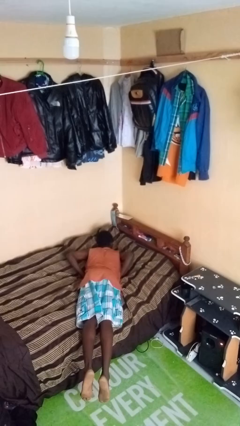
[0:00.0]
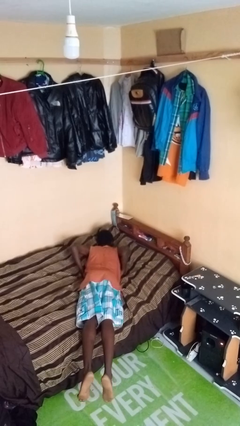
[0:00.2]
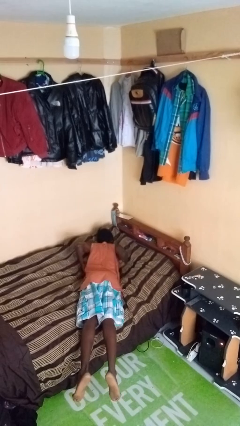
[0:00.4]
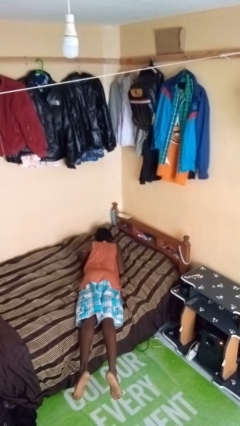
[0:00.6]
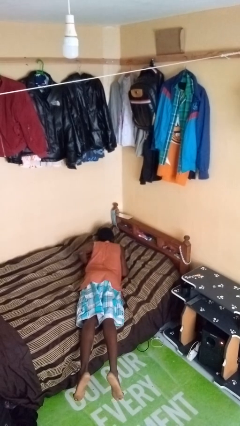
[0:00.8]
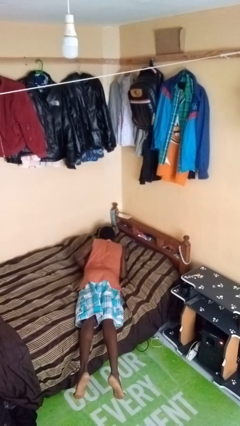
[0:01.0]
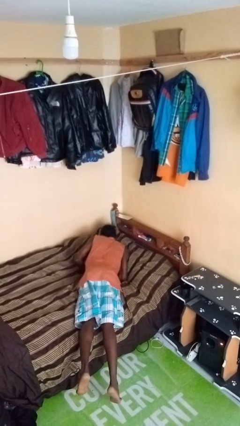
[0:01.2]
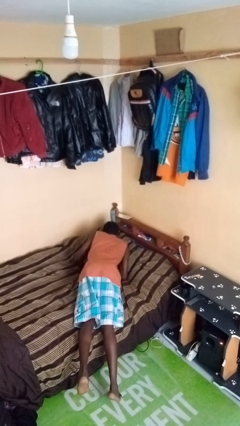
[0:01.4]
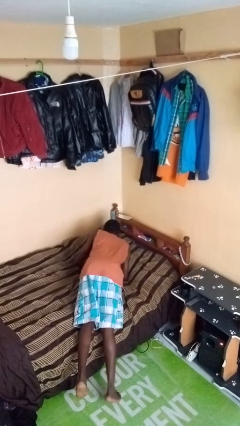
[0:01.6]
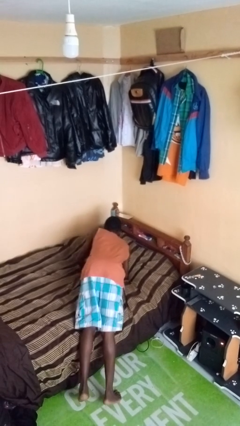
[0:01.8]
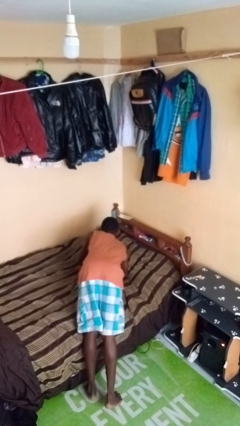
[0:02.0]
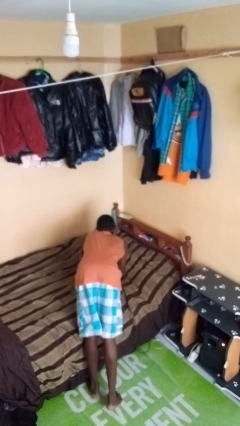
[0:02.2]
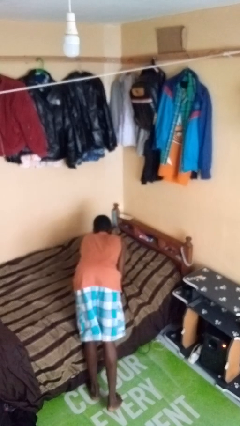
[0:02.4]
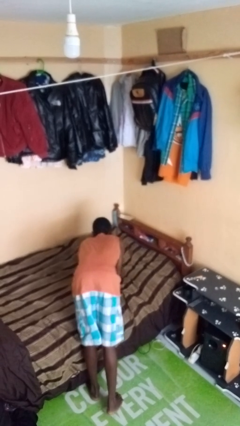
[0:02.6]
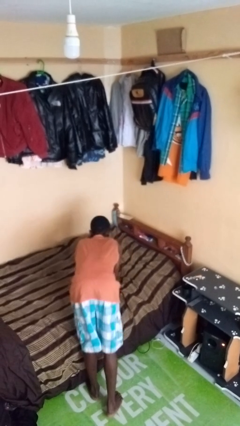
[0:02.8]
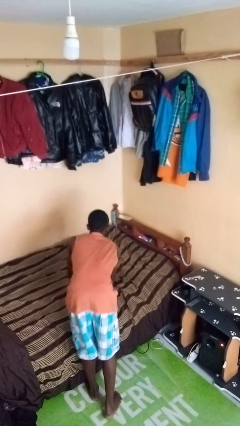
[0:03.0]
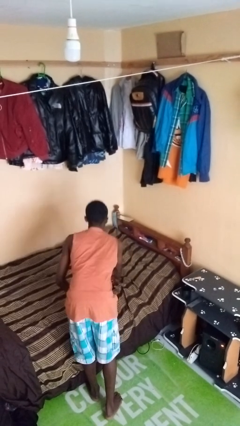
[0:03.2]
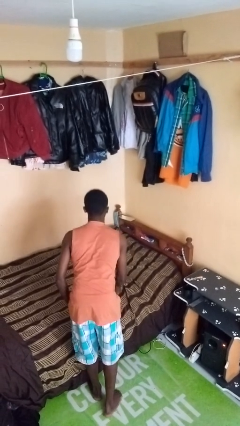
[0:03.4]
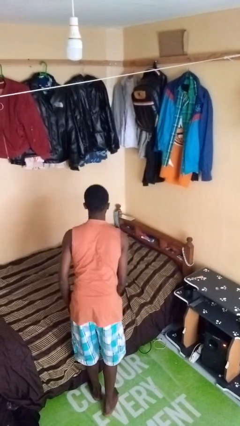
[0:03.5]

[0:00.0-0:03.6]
person stands up

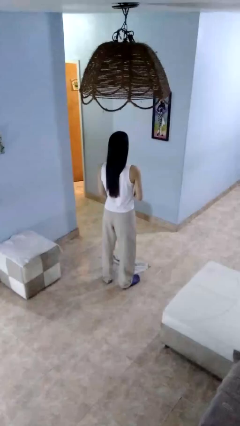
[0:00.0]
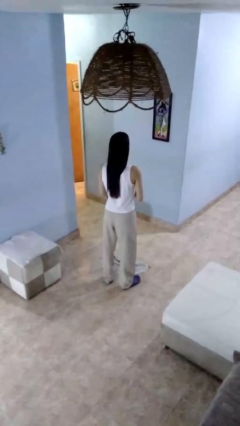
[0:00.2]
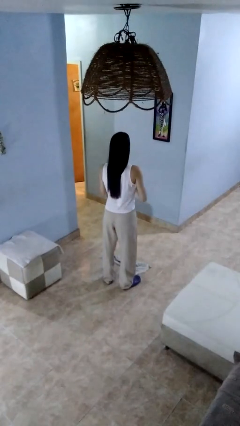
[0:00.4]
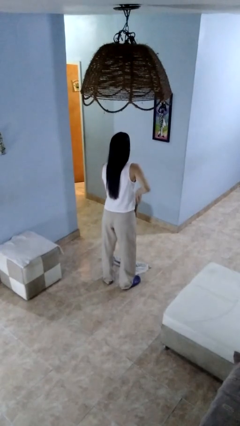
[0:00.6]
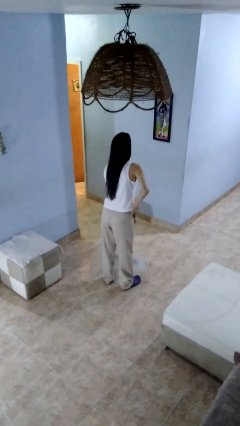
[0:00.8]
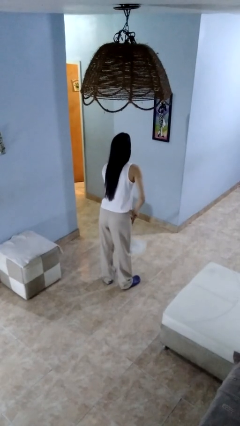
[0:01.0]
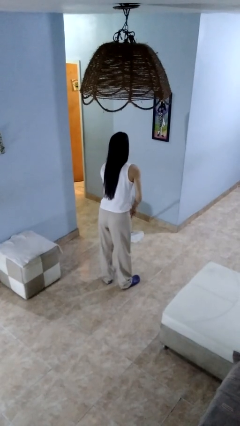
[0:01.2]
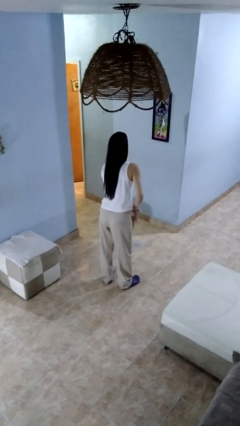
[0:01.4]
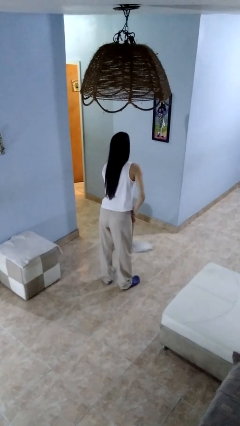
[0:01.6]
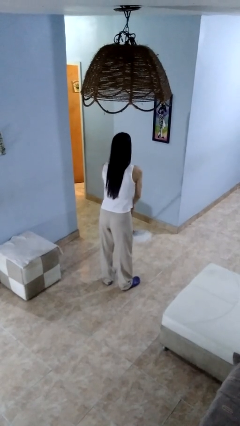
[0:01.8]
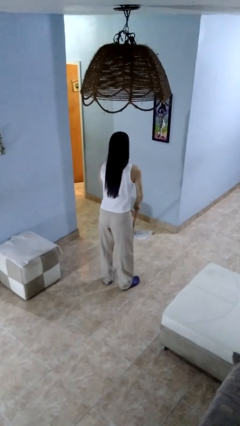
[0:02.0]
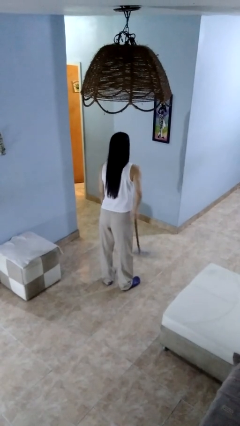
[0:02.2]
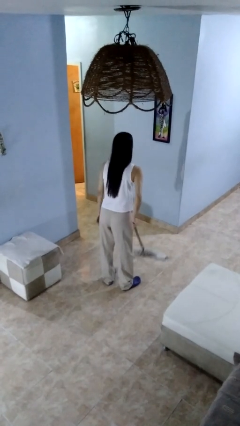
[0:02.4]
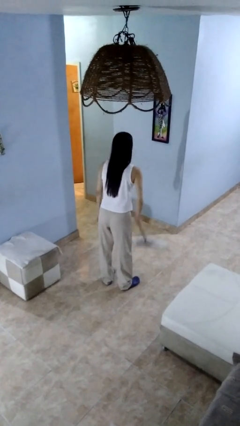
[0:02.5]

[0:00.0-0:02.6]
person mops

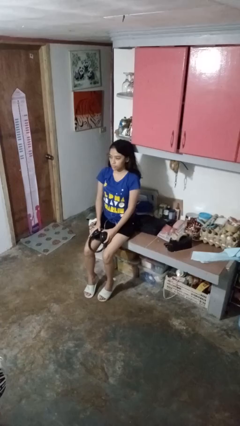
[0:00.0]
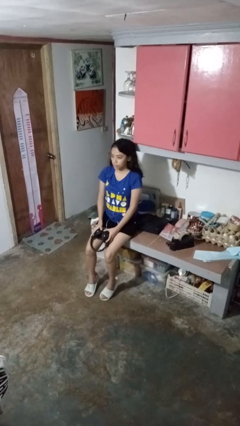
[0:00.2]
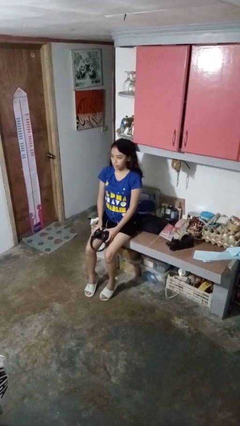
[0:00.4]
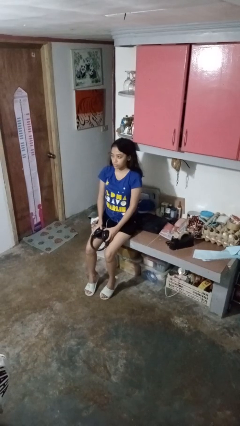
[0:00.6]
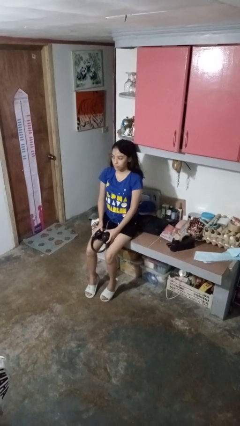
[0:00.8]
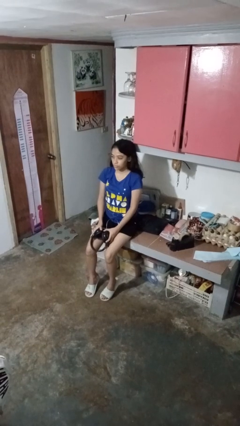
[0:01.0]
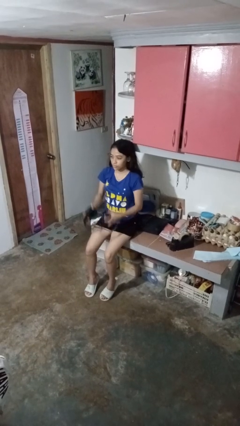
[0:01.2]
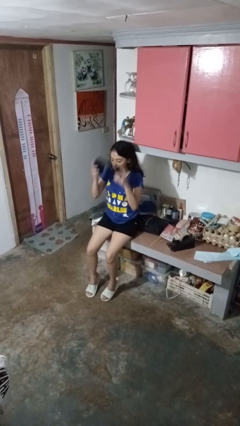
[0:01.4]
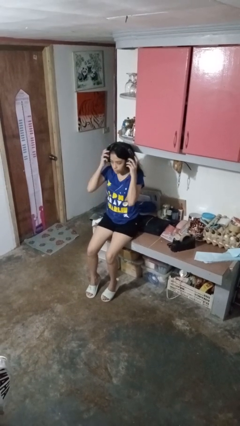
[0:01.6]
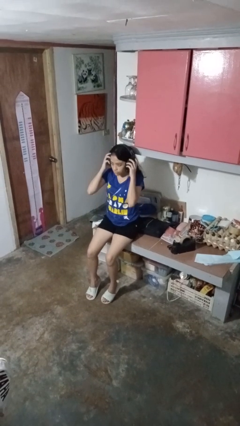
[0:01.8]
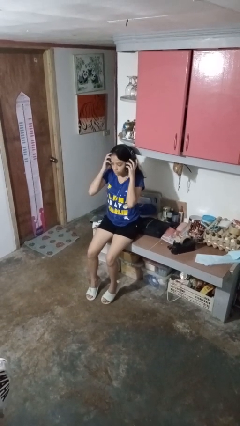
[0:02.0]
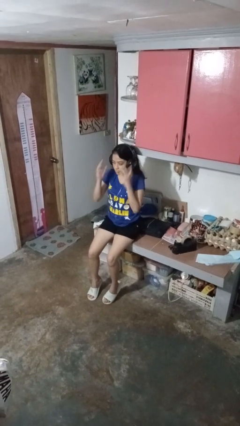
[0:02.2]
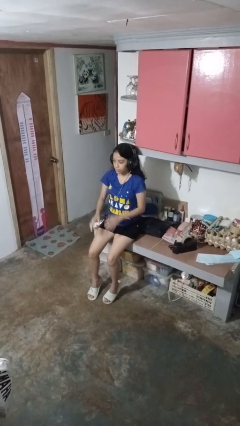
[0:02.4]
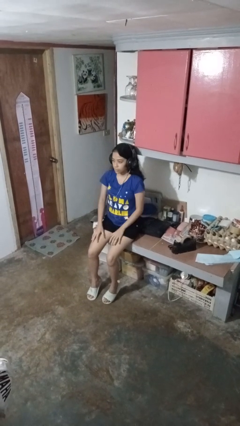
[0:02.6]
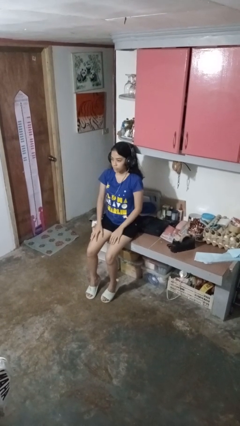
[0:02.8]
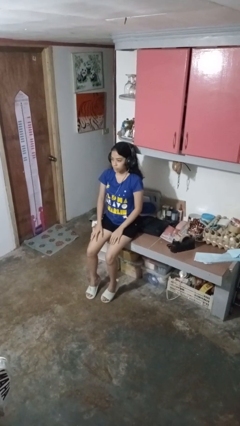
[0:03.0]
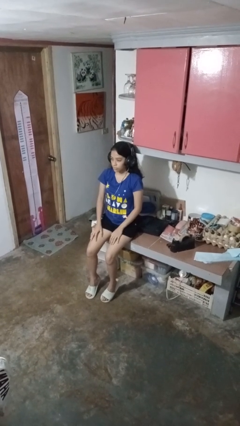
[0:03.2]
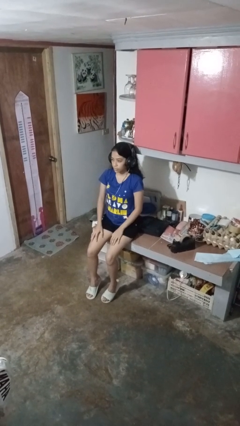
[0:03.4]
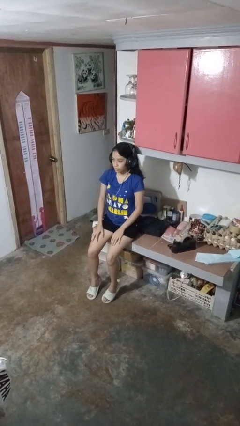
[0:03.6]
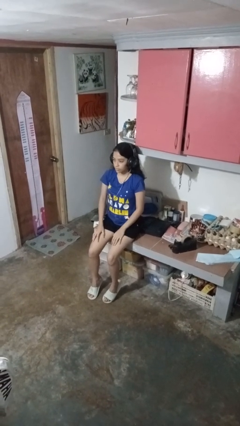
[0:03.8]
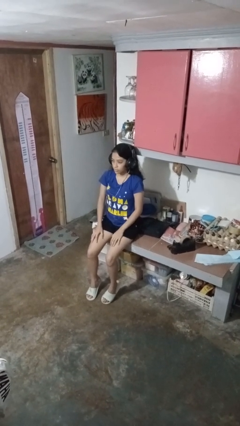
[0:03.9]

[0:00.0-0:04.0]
person puts on headphones

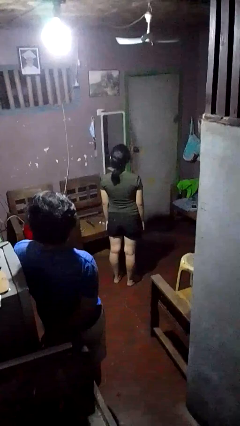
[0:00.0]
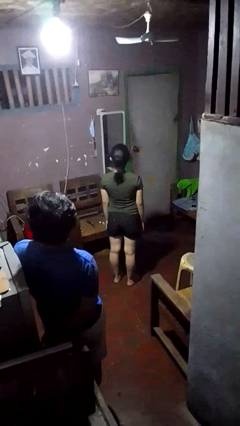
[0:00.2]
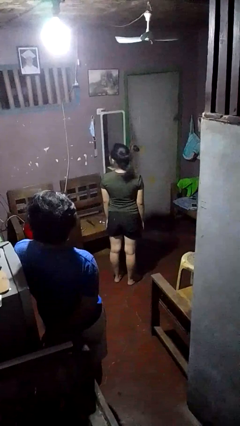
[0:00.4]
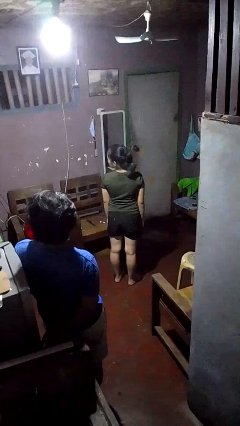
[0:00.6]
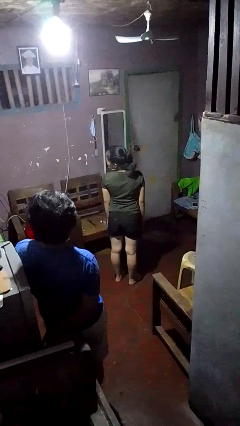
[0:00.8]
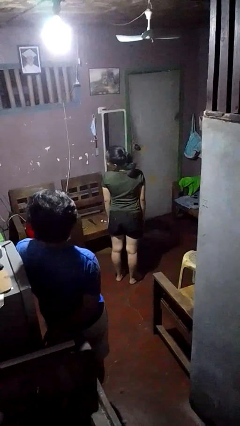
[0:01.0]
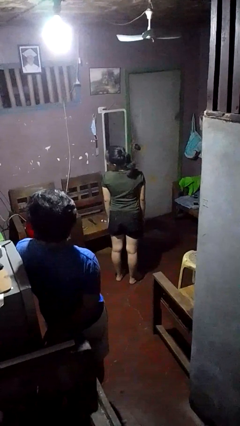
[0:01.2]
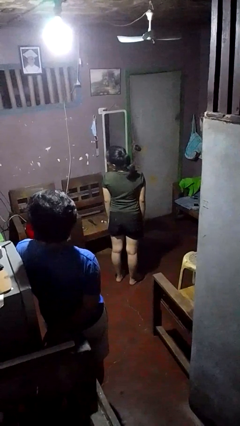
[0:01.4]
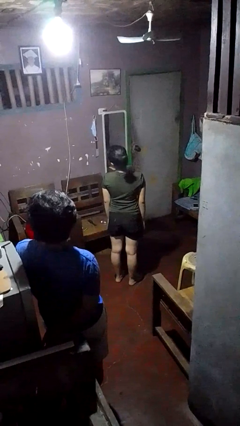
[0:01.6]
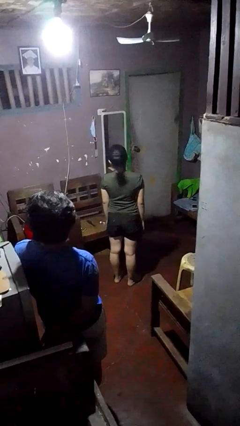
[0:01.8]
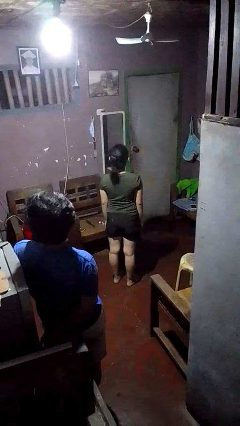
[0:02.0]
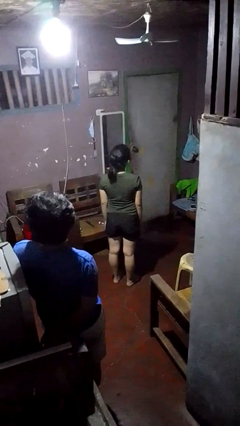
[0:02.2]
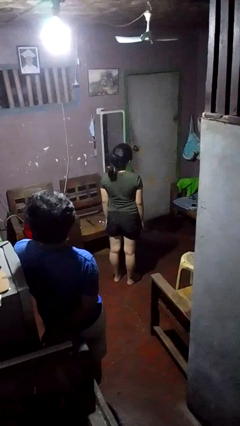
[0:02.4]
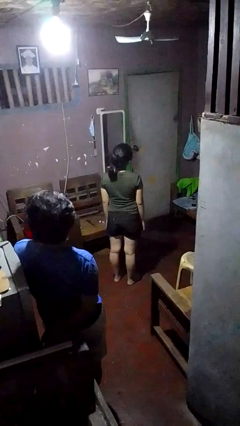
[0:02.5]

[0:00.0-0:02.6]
person looks over shoulder

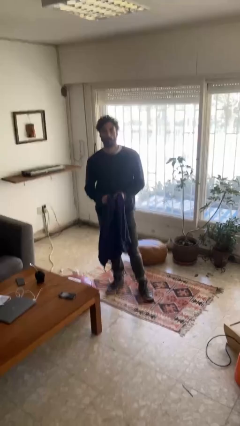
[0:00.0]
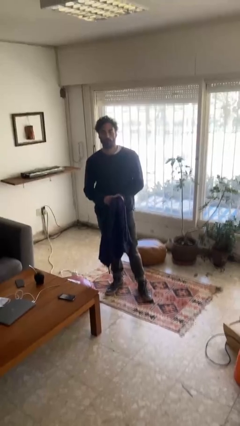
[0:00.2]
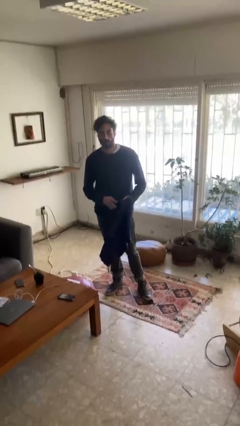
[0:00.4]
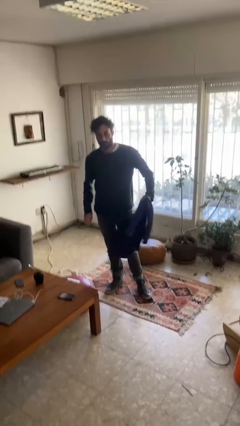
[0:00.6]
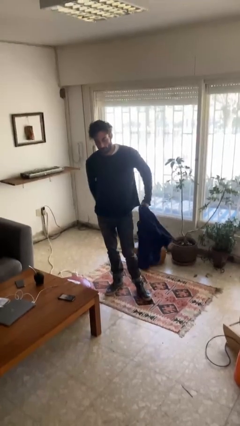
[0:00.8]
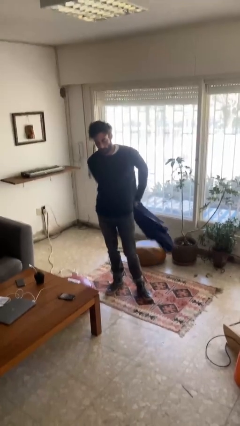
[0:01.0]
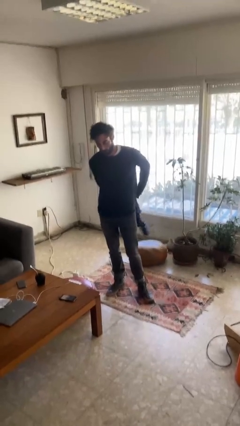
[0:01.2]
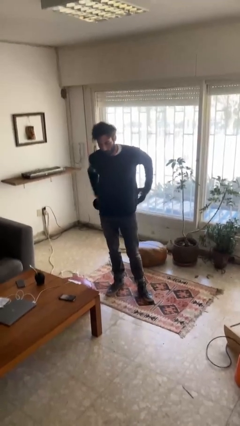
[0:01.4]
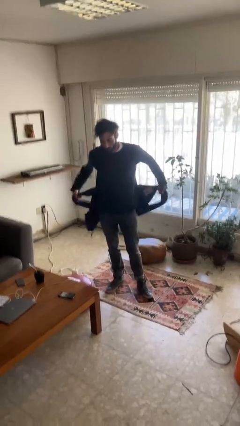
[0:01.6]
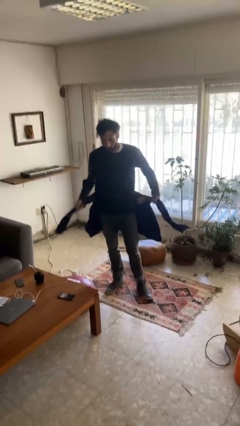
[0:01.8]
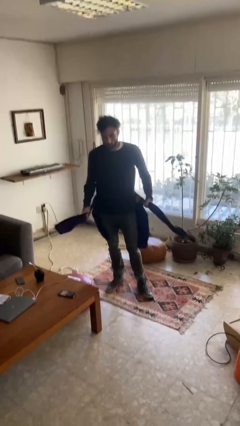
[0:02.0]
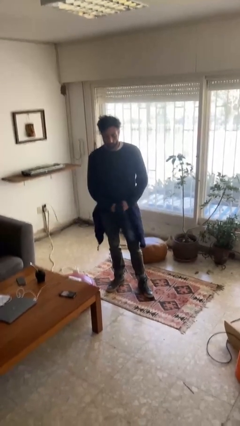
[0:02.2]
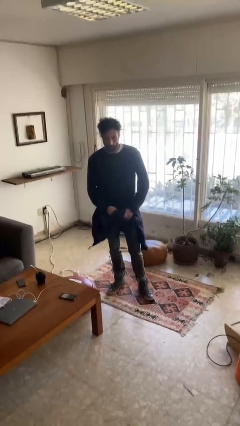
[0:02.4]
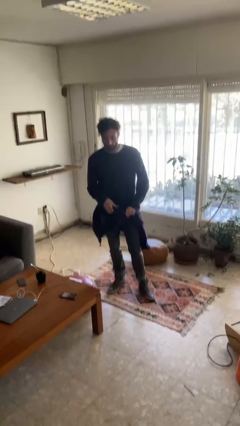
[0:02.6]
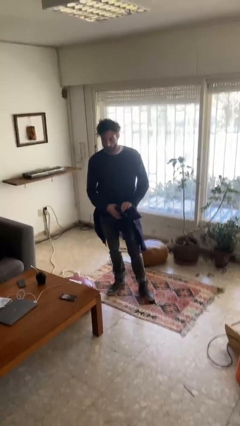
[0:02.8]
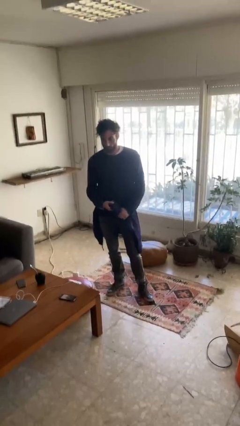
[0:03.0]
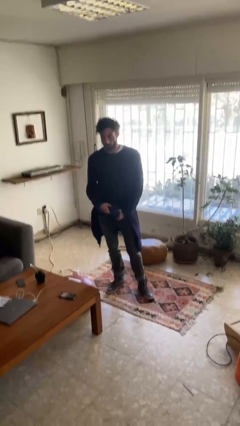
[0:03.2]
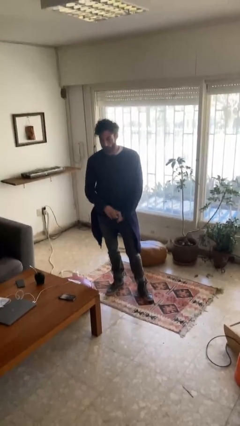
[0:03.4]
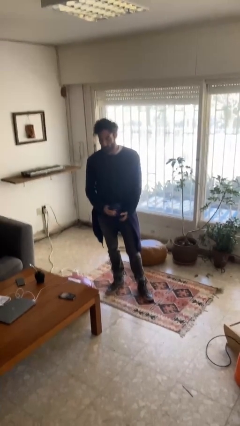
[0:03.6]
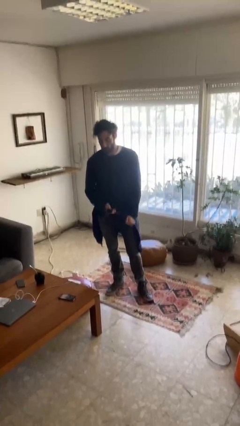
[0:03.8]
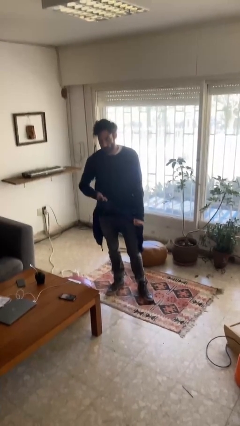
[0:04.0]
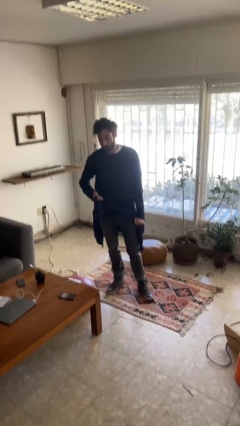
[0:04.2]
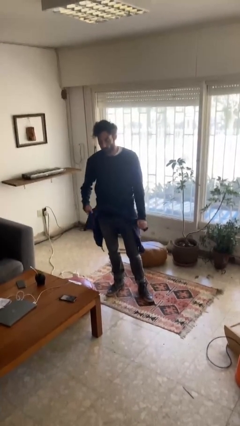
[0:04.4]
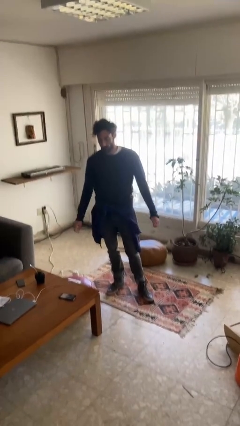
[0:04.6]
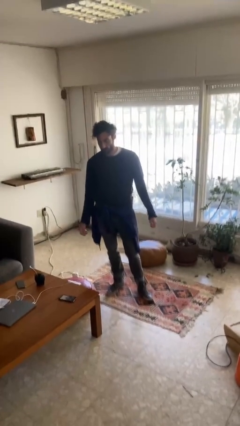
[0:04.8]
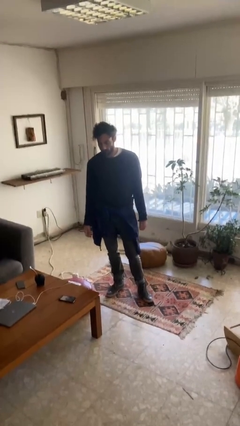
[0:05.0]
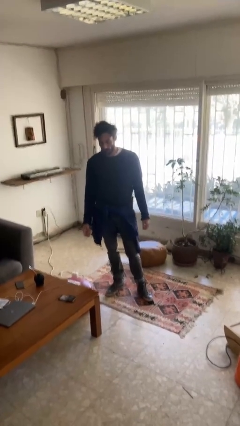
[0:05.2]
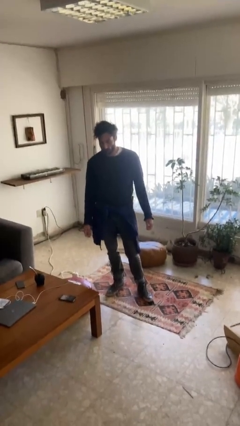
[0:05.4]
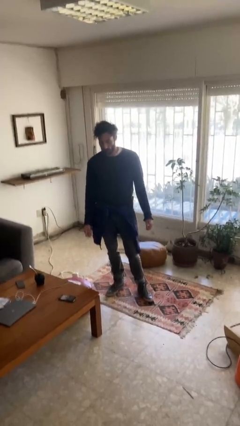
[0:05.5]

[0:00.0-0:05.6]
person ties jacket around waist
